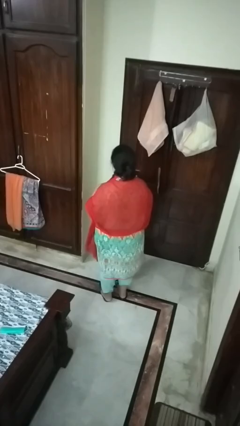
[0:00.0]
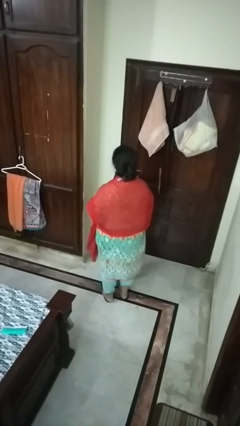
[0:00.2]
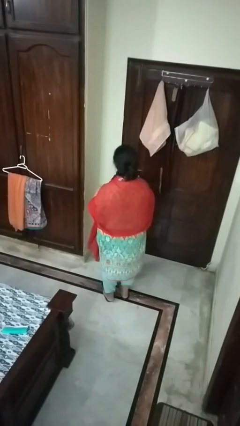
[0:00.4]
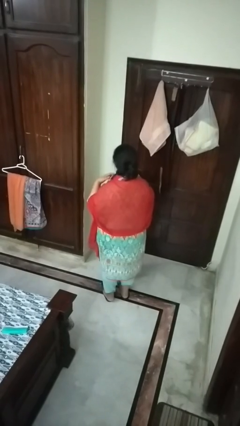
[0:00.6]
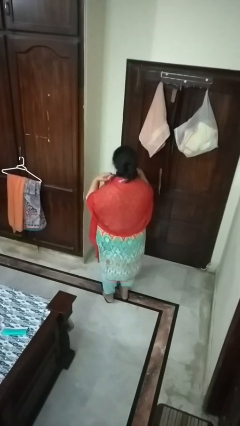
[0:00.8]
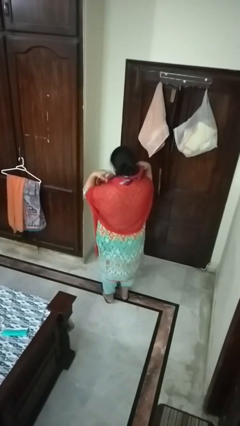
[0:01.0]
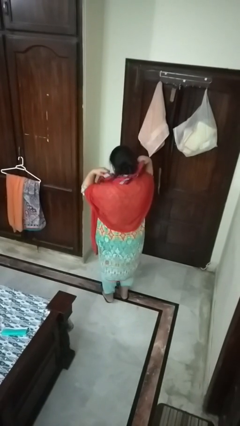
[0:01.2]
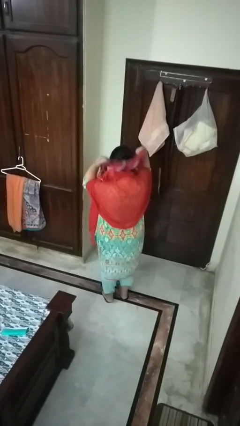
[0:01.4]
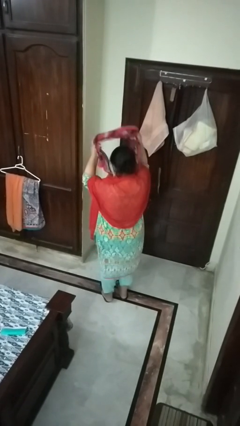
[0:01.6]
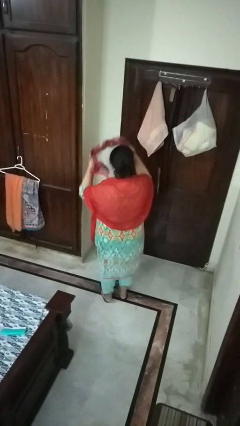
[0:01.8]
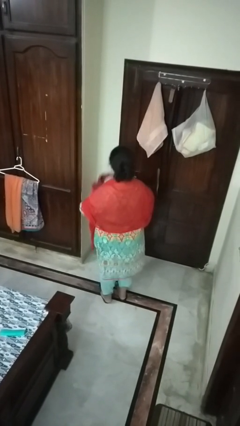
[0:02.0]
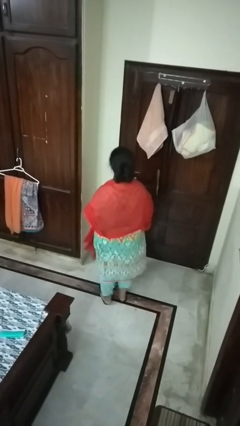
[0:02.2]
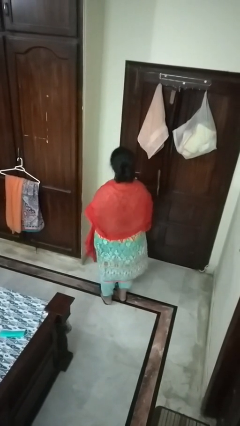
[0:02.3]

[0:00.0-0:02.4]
person takes off scarf

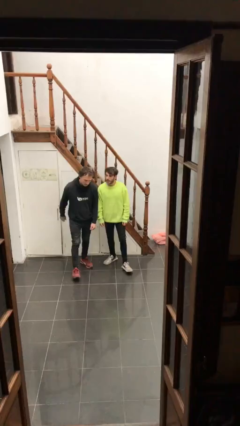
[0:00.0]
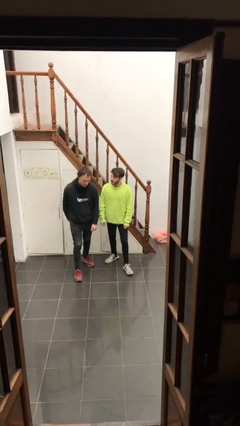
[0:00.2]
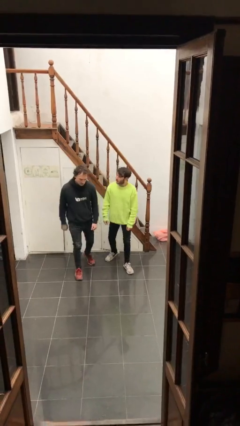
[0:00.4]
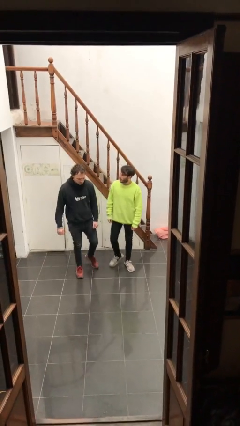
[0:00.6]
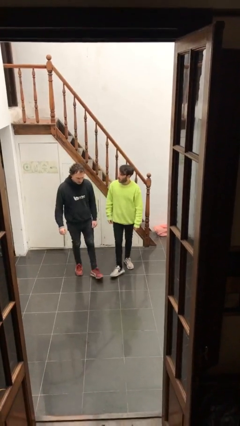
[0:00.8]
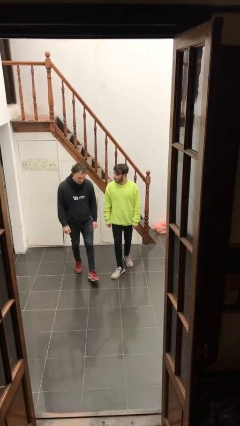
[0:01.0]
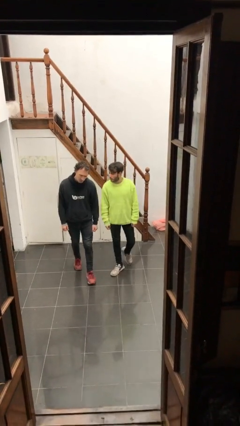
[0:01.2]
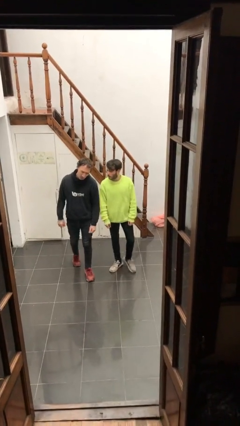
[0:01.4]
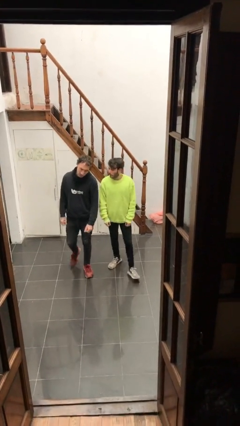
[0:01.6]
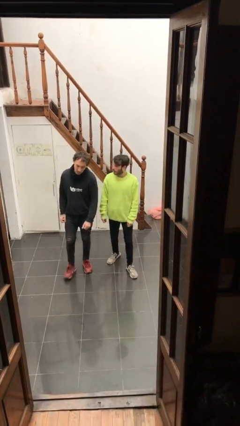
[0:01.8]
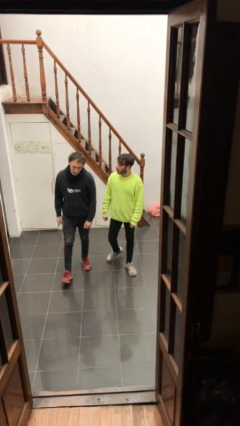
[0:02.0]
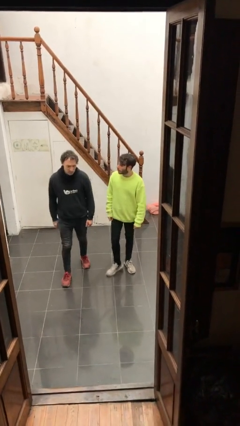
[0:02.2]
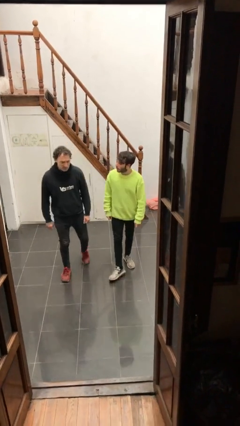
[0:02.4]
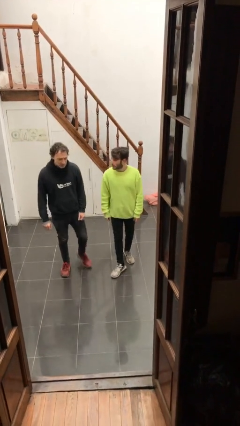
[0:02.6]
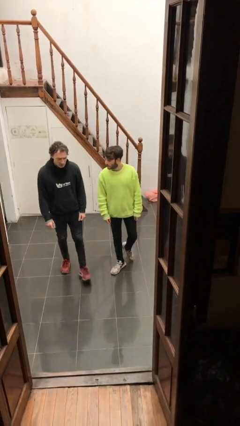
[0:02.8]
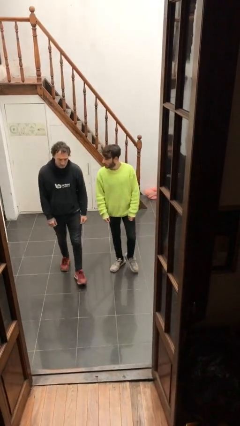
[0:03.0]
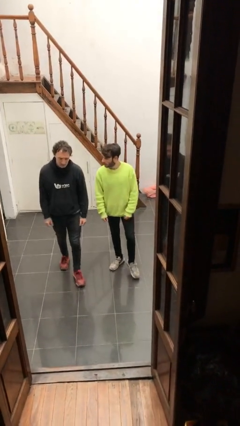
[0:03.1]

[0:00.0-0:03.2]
person talks to person

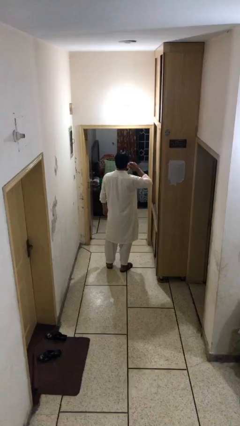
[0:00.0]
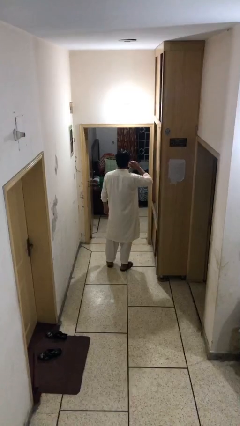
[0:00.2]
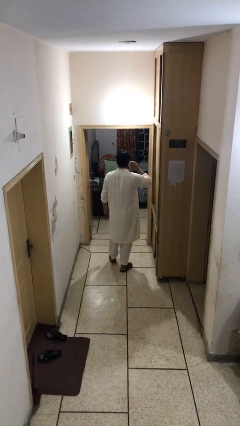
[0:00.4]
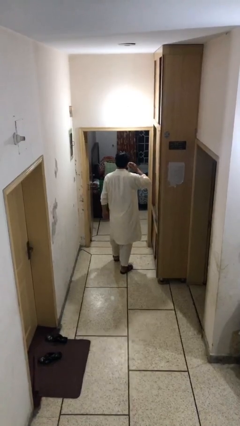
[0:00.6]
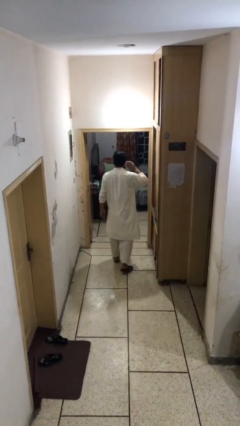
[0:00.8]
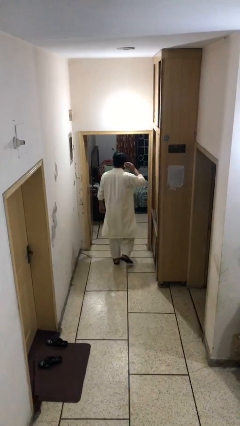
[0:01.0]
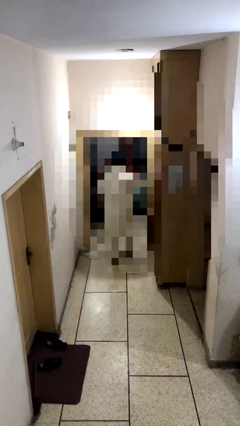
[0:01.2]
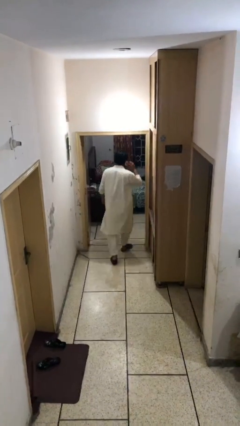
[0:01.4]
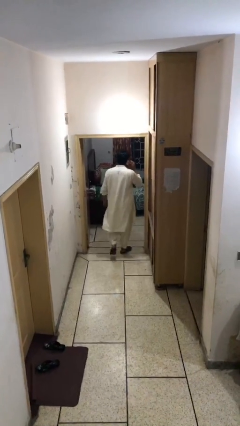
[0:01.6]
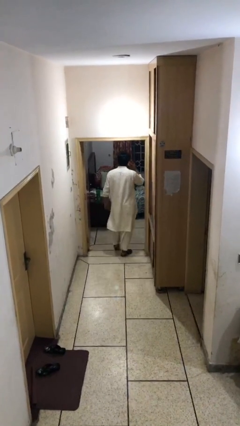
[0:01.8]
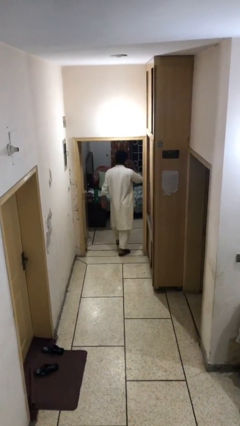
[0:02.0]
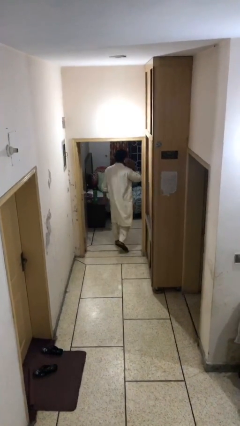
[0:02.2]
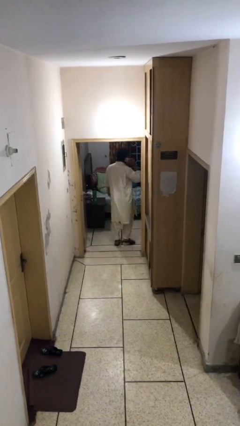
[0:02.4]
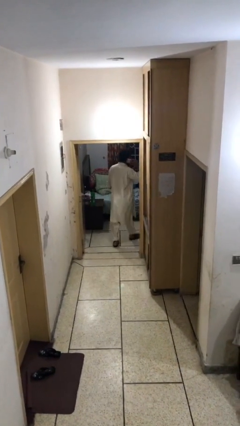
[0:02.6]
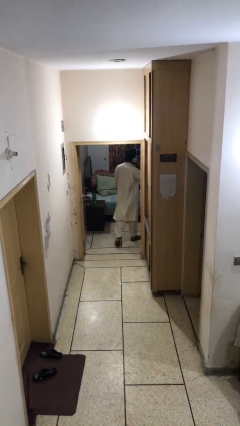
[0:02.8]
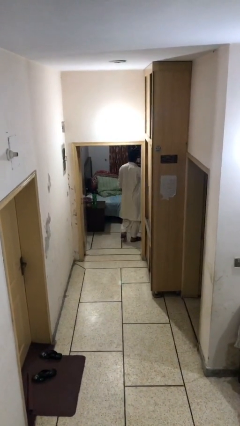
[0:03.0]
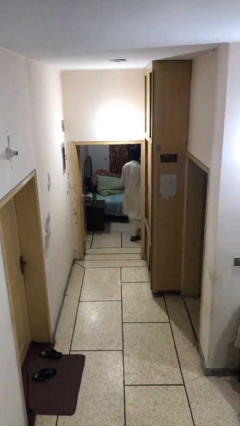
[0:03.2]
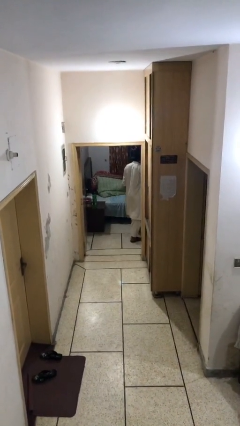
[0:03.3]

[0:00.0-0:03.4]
person exits scene through structure

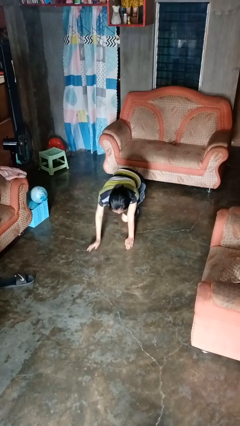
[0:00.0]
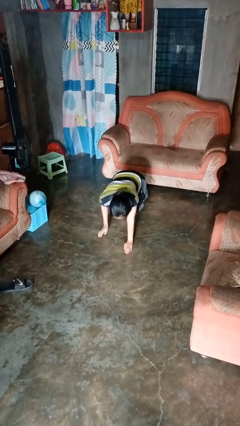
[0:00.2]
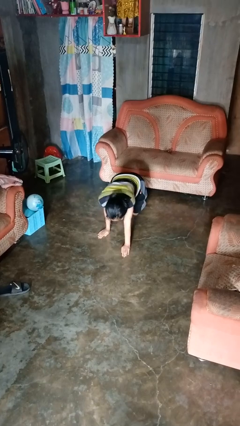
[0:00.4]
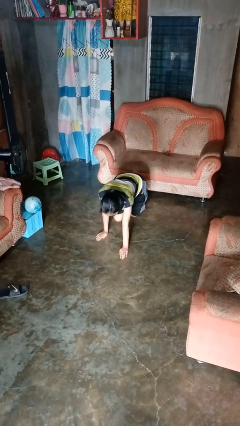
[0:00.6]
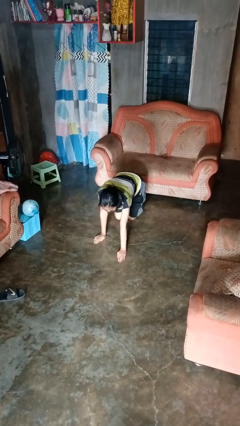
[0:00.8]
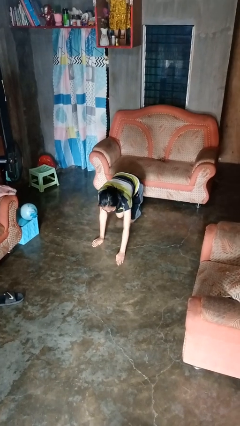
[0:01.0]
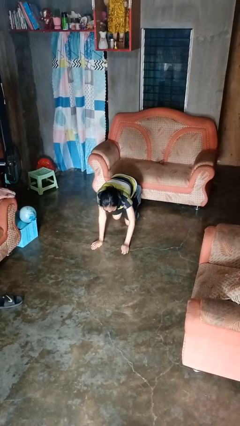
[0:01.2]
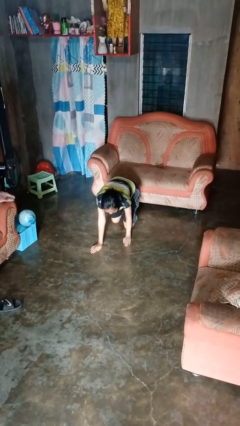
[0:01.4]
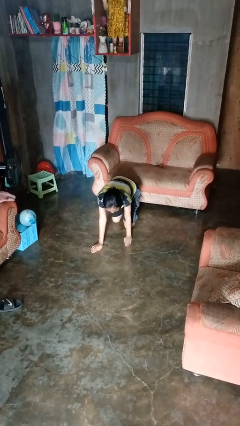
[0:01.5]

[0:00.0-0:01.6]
person crawls

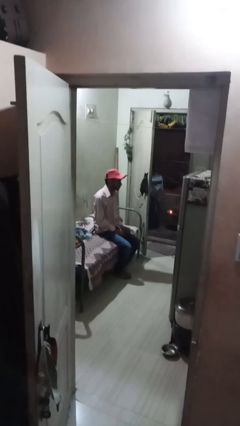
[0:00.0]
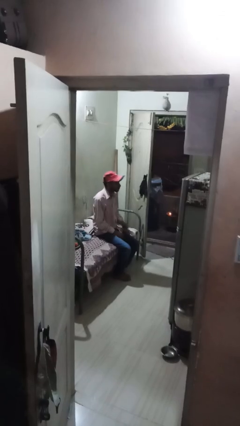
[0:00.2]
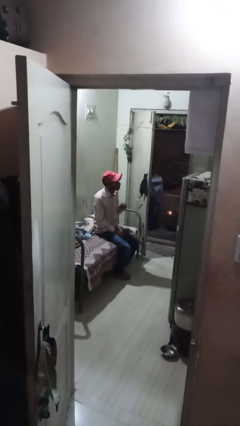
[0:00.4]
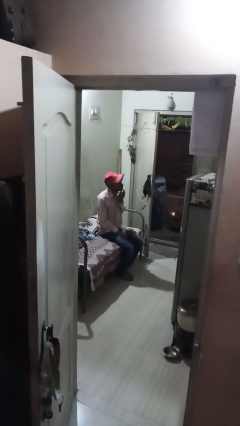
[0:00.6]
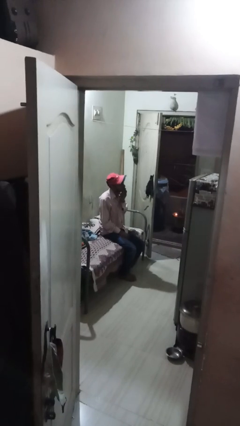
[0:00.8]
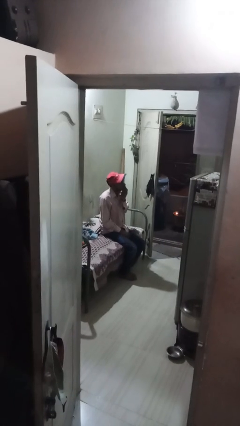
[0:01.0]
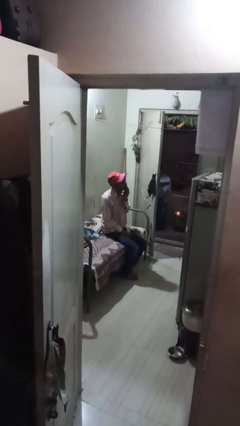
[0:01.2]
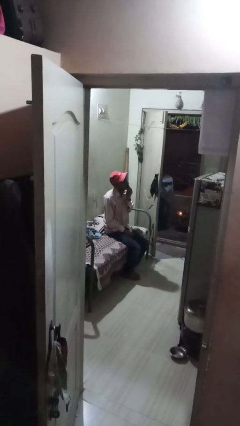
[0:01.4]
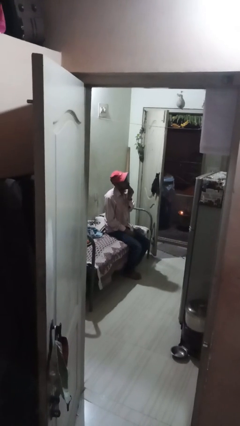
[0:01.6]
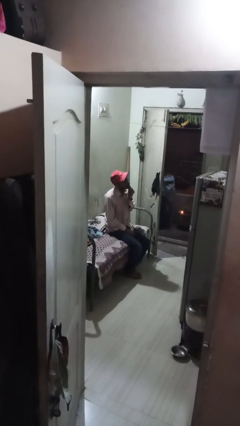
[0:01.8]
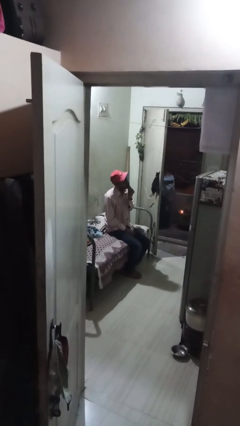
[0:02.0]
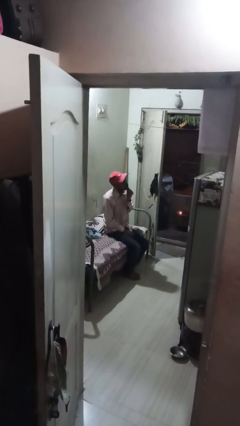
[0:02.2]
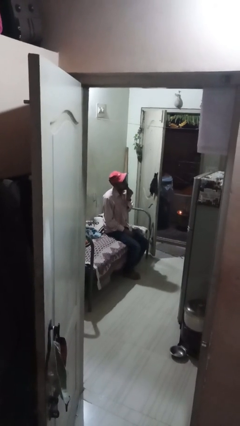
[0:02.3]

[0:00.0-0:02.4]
person strokes chin

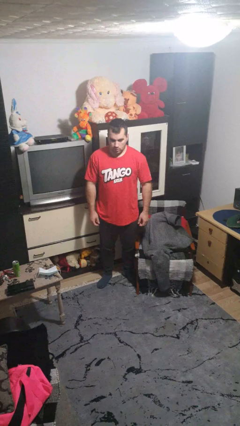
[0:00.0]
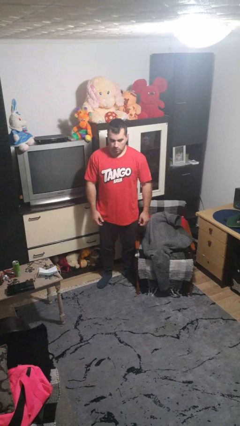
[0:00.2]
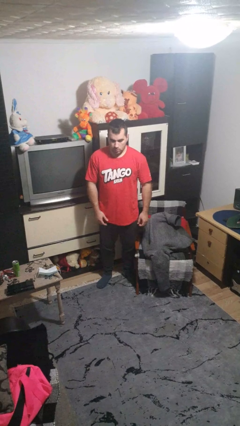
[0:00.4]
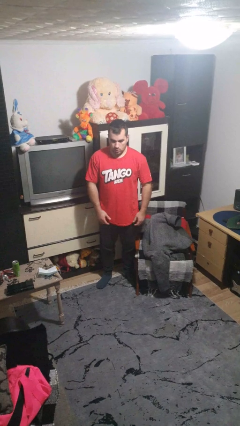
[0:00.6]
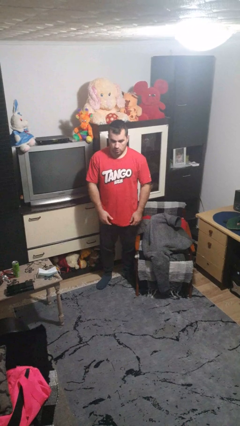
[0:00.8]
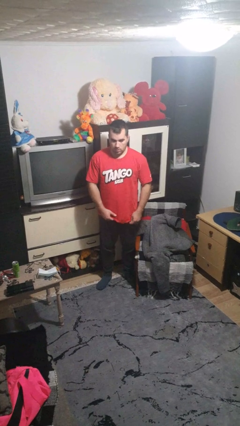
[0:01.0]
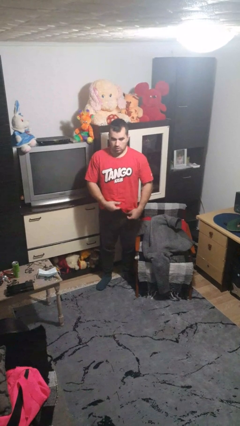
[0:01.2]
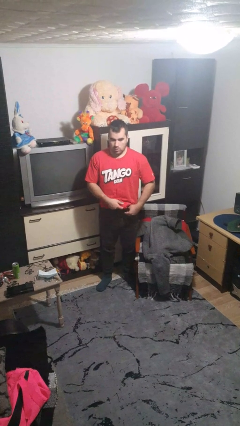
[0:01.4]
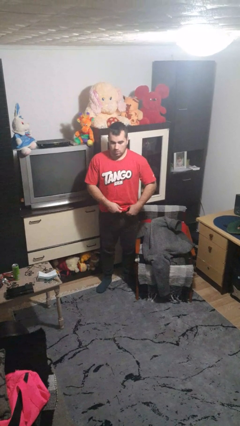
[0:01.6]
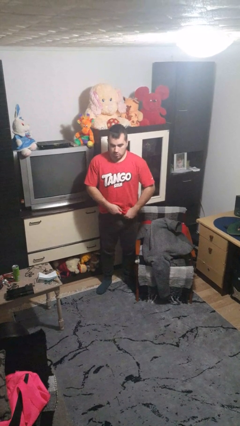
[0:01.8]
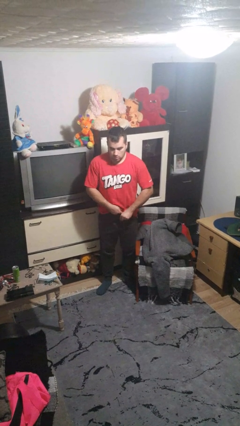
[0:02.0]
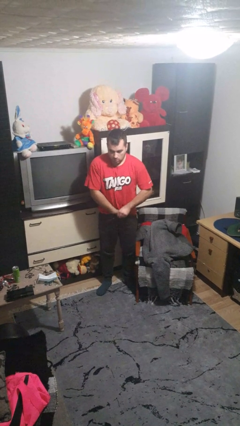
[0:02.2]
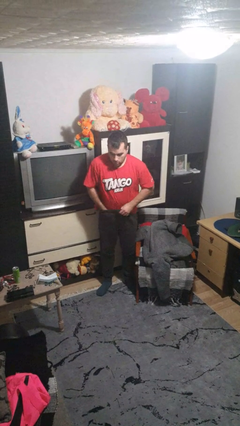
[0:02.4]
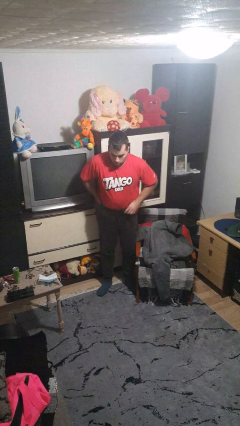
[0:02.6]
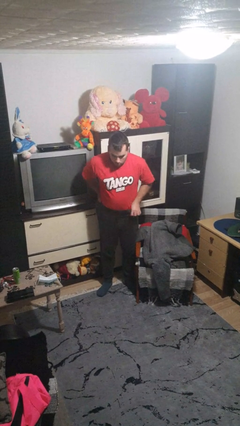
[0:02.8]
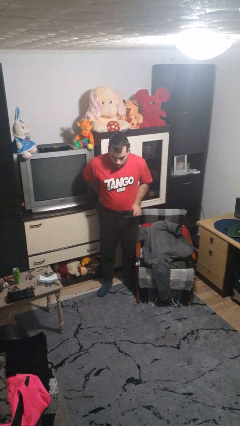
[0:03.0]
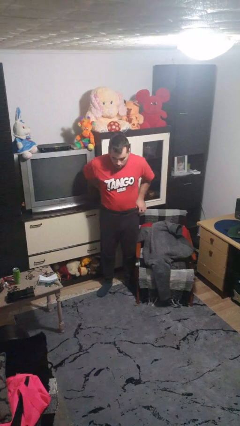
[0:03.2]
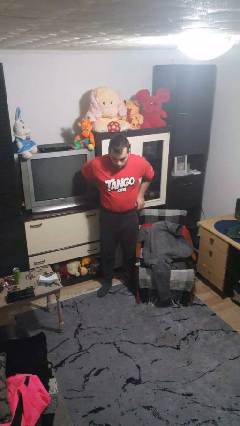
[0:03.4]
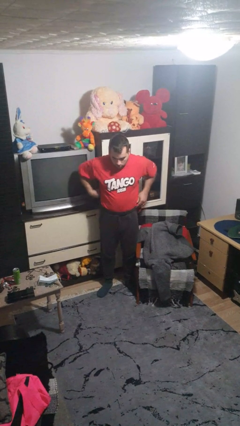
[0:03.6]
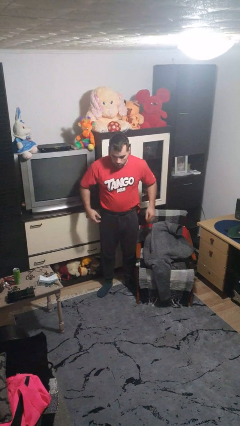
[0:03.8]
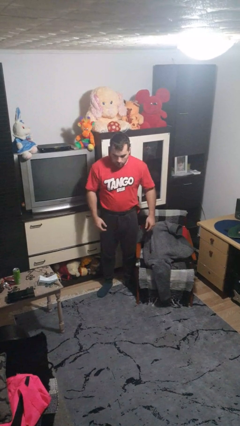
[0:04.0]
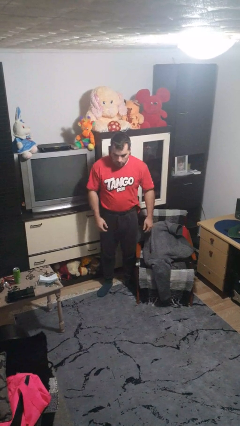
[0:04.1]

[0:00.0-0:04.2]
person tucks in shirt

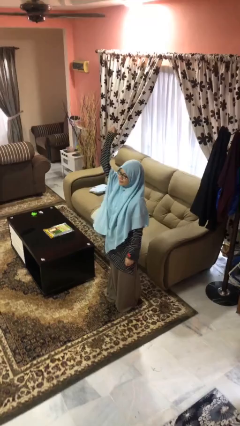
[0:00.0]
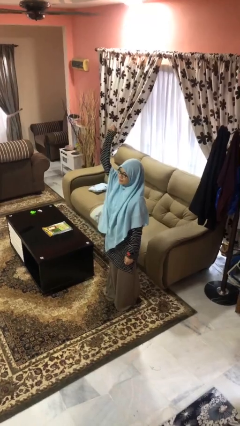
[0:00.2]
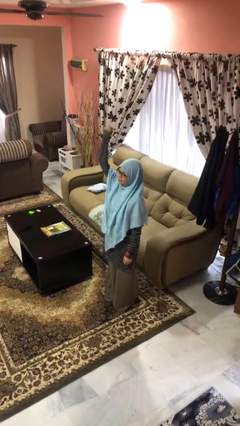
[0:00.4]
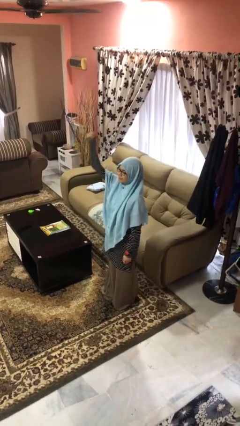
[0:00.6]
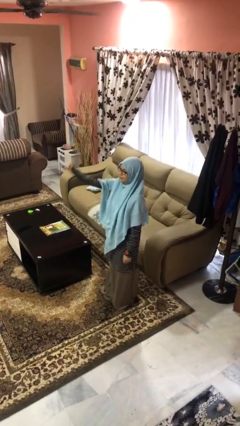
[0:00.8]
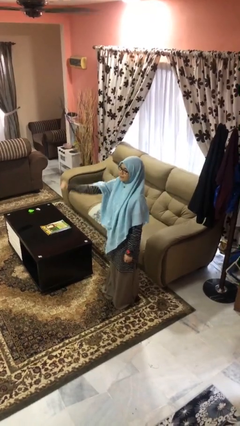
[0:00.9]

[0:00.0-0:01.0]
person gestures lower hand
